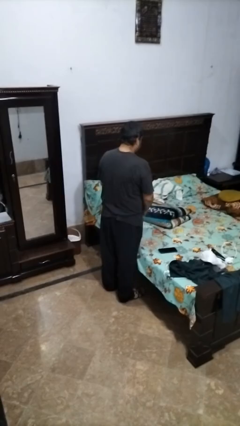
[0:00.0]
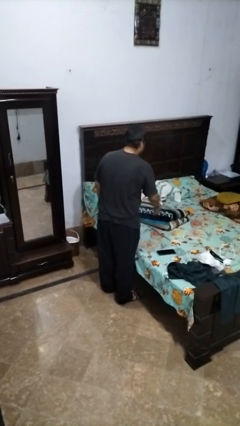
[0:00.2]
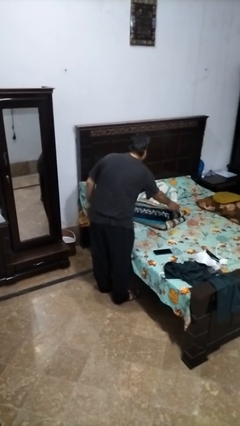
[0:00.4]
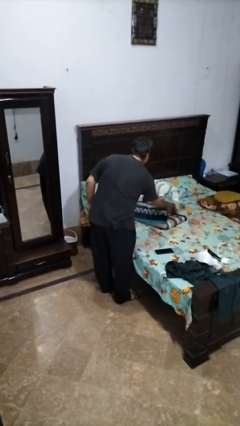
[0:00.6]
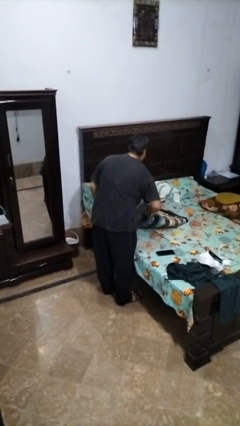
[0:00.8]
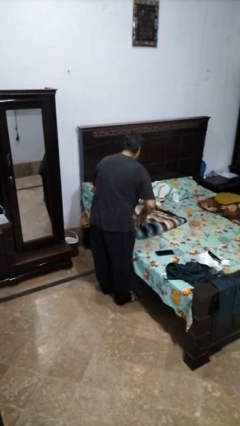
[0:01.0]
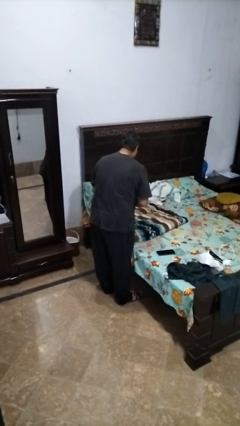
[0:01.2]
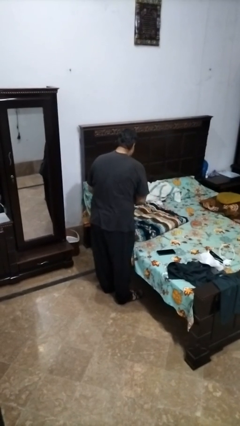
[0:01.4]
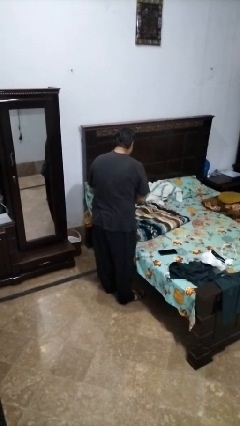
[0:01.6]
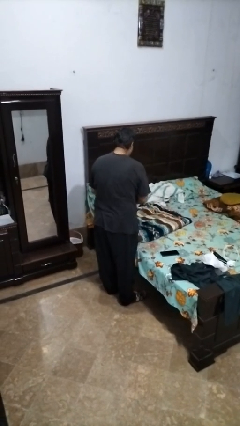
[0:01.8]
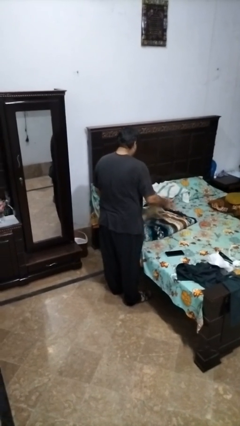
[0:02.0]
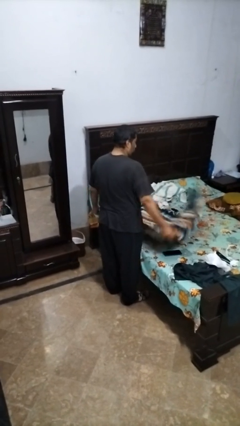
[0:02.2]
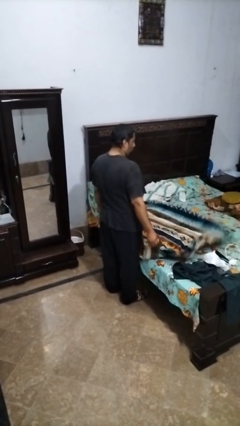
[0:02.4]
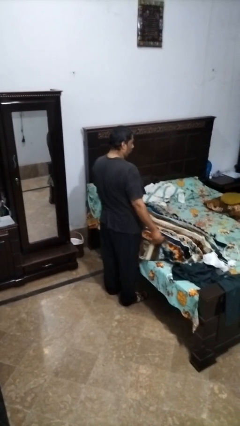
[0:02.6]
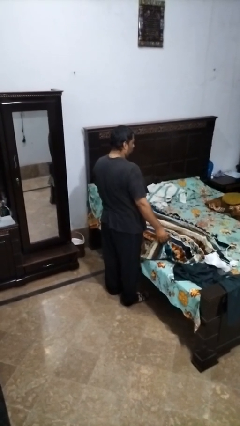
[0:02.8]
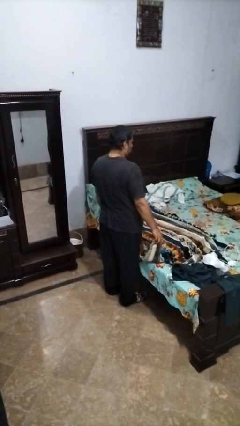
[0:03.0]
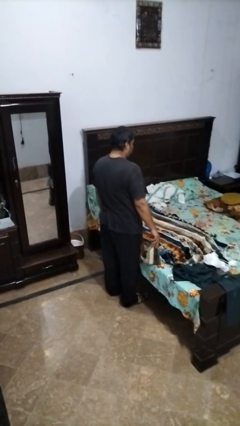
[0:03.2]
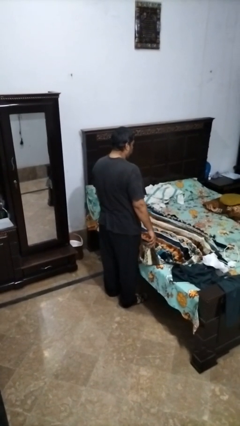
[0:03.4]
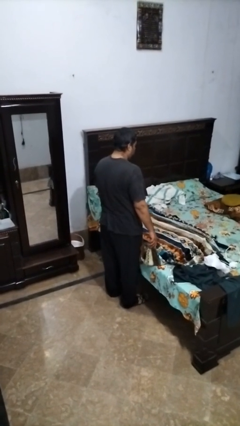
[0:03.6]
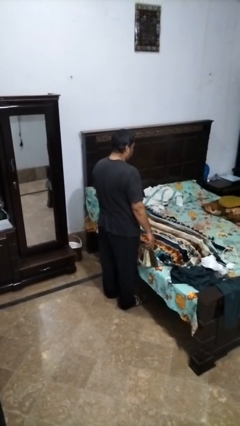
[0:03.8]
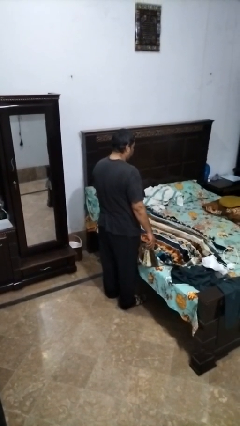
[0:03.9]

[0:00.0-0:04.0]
person unfolds blanket

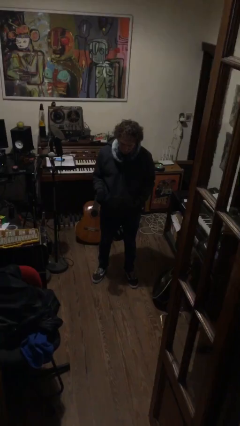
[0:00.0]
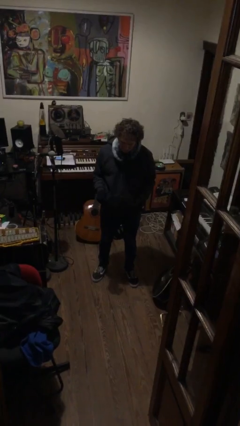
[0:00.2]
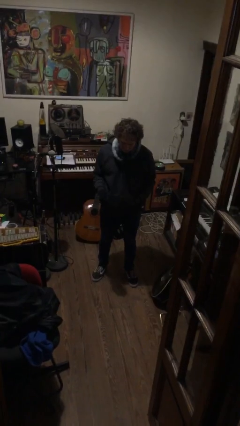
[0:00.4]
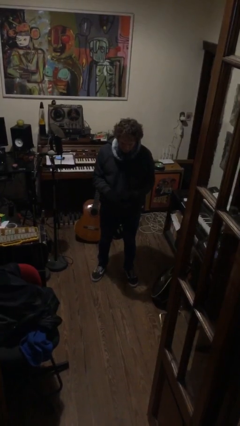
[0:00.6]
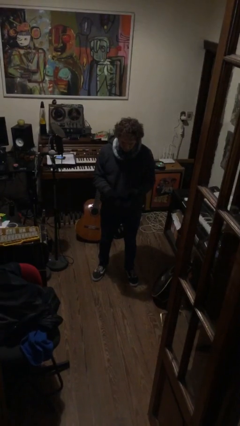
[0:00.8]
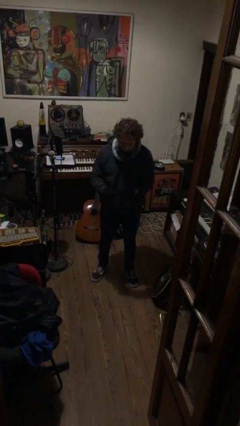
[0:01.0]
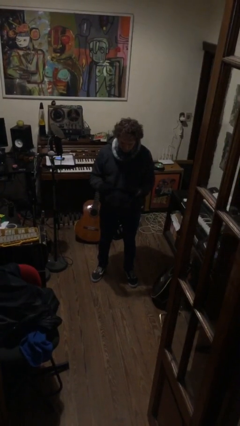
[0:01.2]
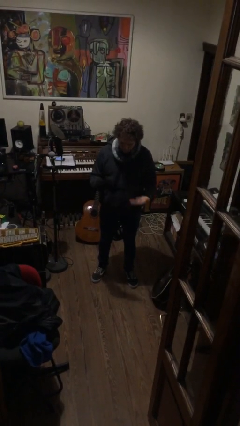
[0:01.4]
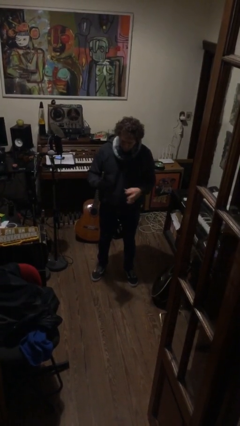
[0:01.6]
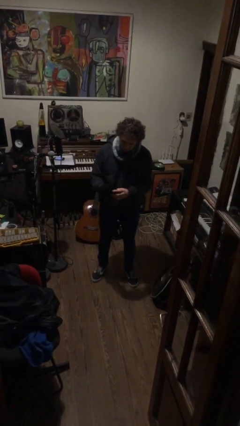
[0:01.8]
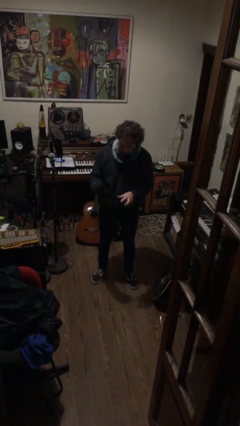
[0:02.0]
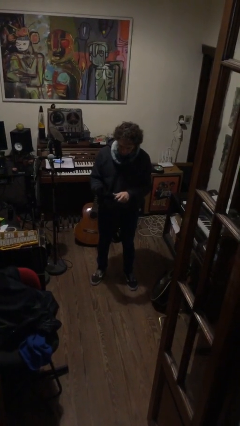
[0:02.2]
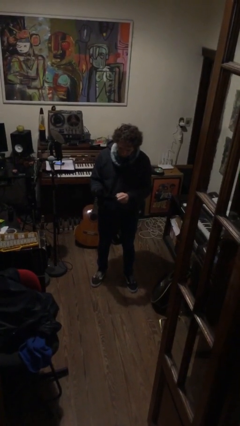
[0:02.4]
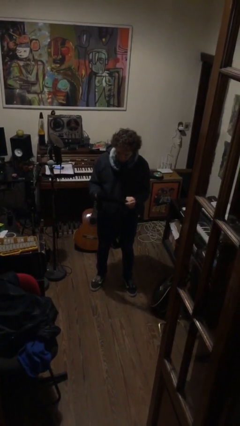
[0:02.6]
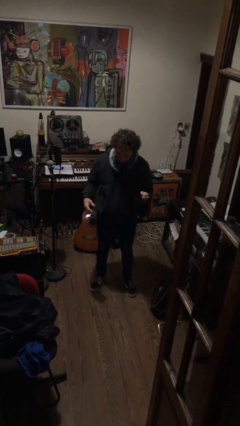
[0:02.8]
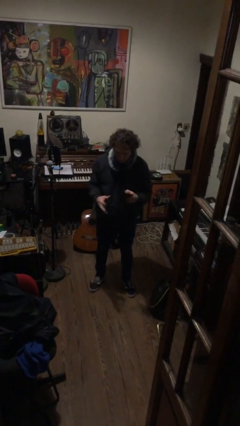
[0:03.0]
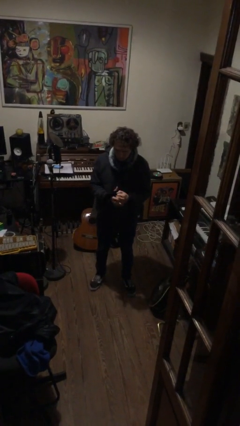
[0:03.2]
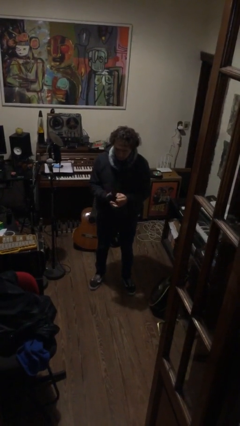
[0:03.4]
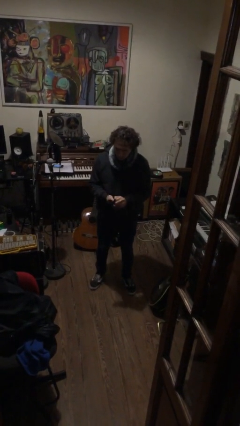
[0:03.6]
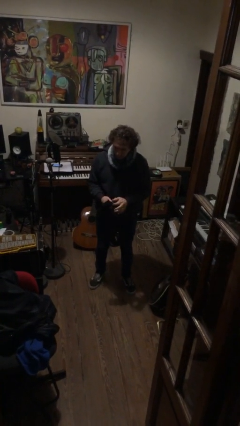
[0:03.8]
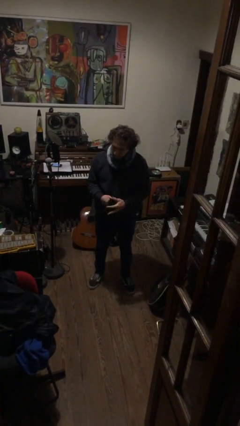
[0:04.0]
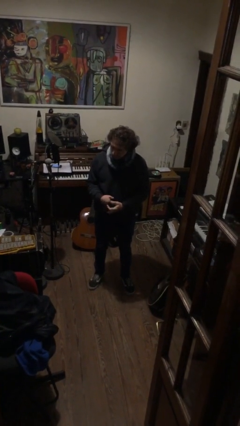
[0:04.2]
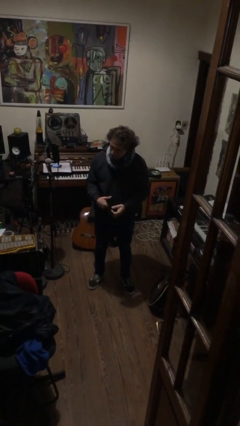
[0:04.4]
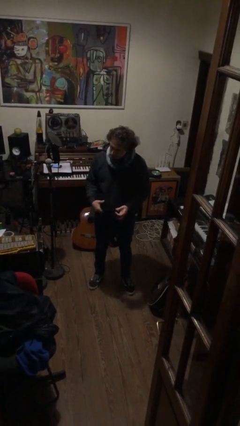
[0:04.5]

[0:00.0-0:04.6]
person takes off gloves

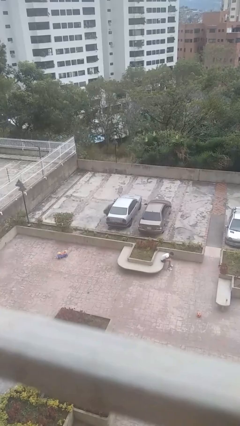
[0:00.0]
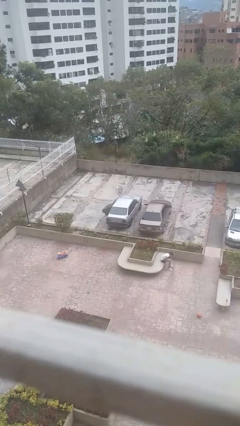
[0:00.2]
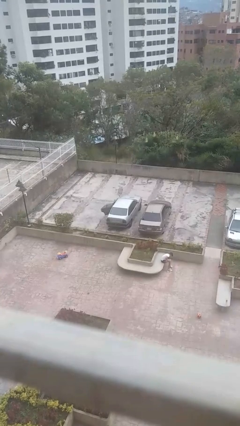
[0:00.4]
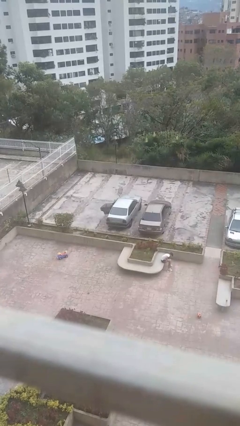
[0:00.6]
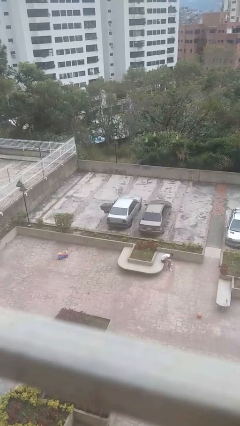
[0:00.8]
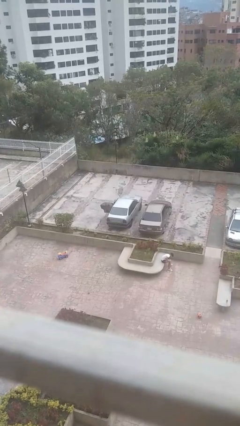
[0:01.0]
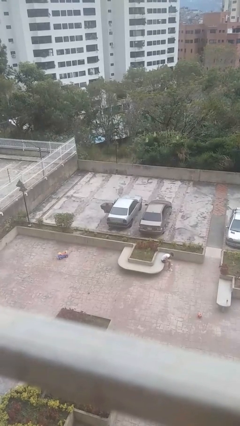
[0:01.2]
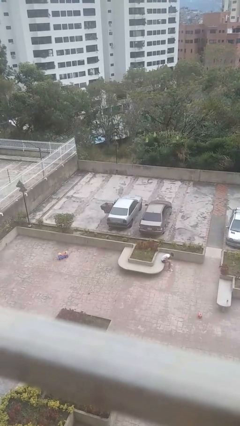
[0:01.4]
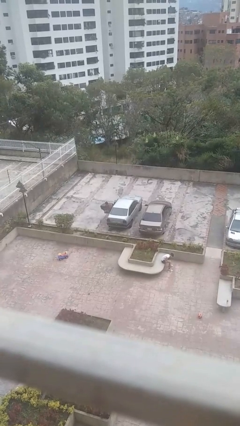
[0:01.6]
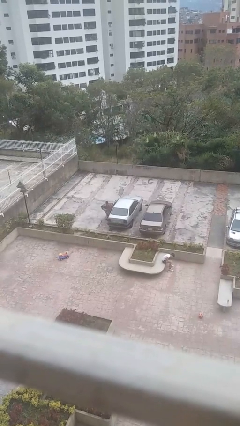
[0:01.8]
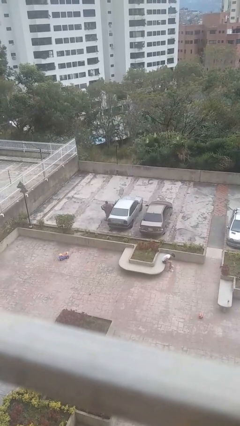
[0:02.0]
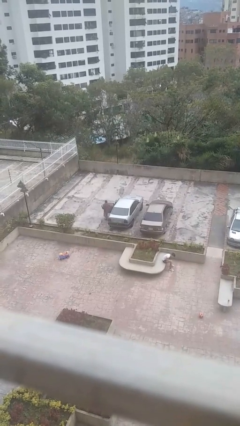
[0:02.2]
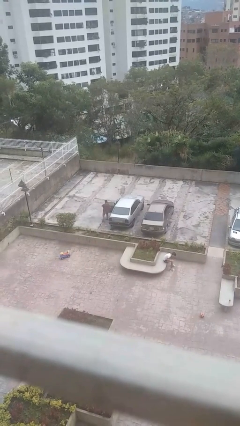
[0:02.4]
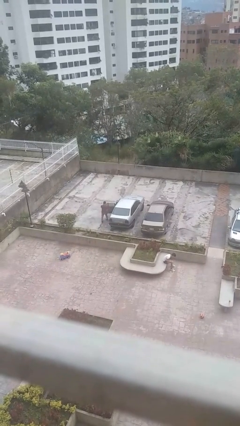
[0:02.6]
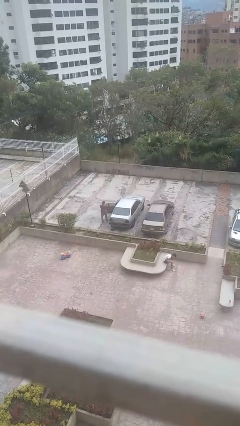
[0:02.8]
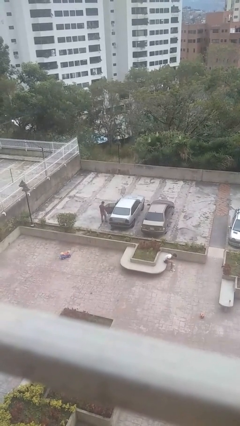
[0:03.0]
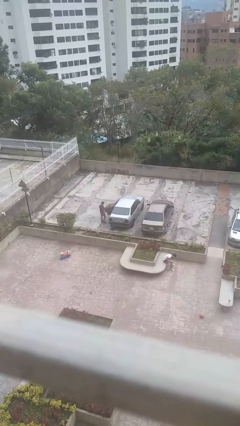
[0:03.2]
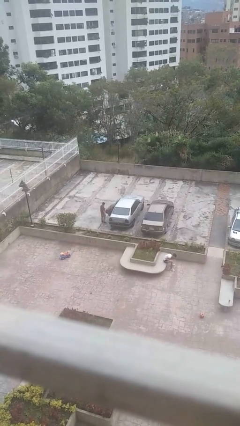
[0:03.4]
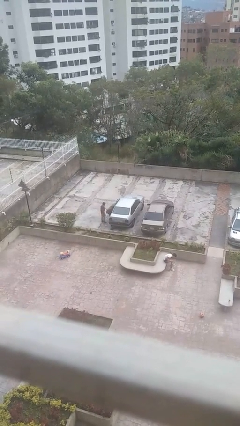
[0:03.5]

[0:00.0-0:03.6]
car drops off person

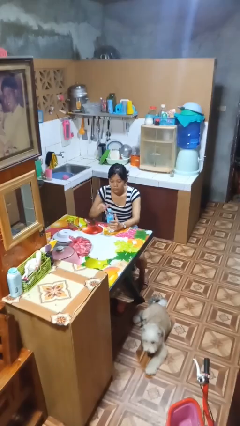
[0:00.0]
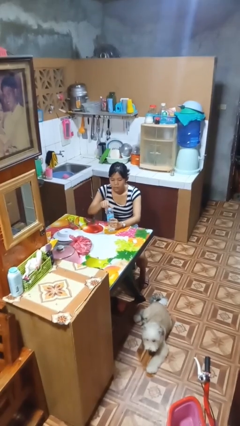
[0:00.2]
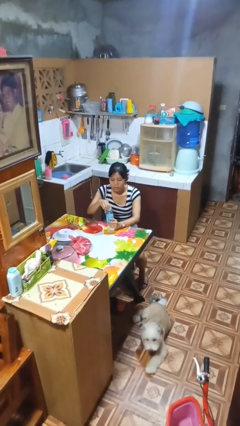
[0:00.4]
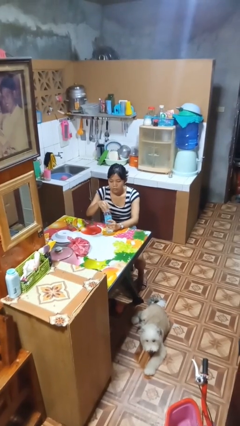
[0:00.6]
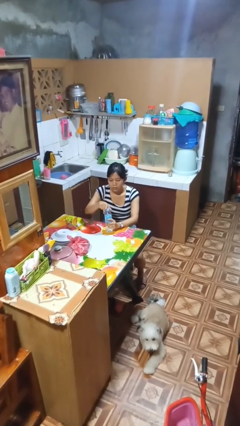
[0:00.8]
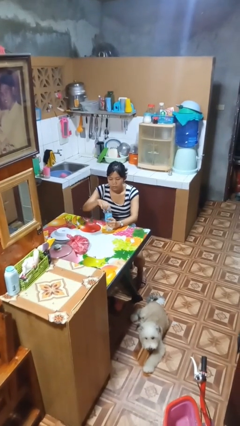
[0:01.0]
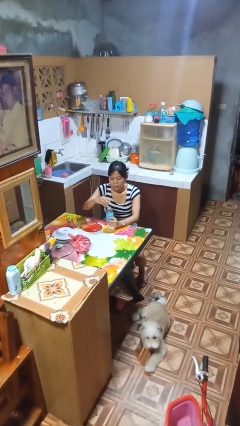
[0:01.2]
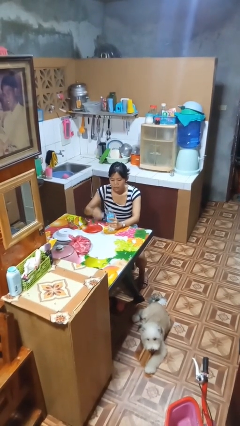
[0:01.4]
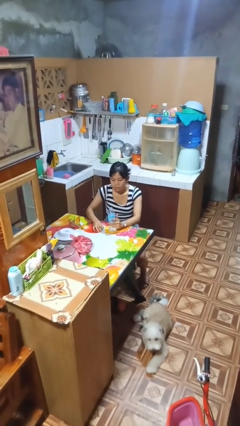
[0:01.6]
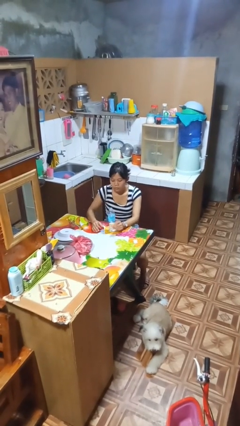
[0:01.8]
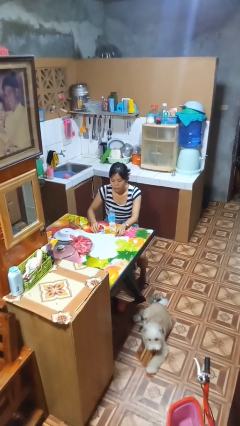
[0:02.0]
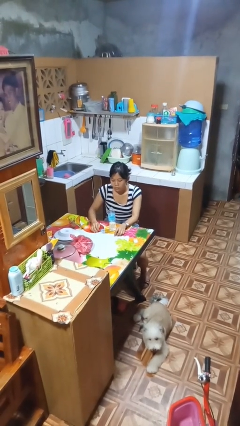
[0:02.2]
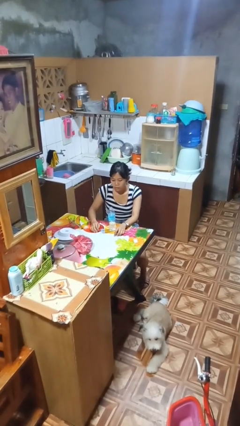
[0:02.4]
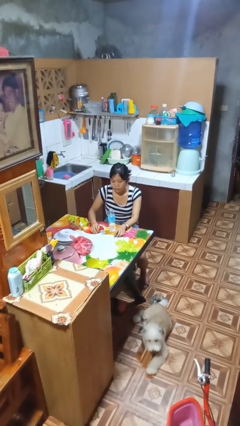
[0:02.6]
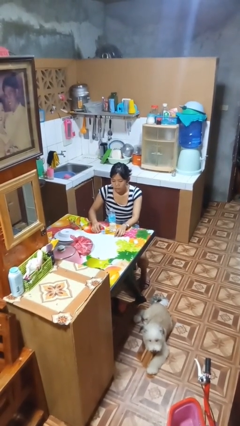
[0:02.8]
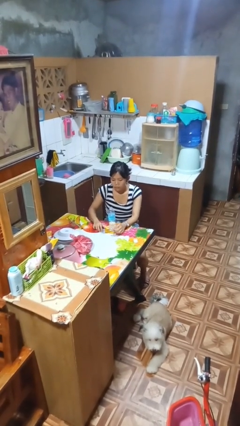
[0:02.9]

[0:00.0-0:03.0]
person unscrews lid from bottle

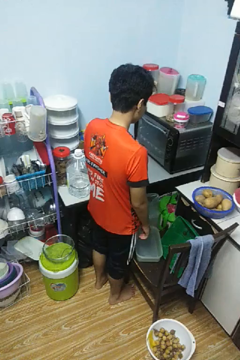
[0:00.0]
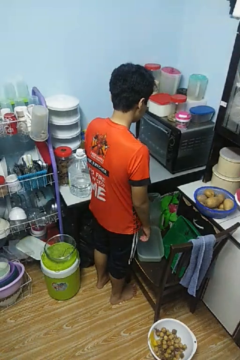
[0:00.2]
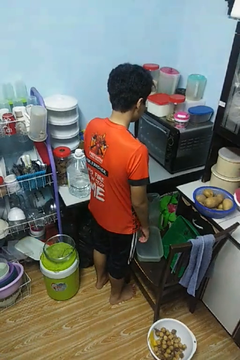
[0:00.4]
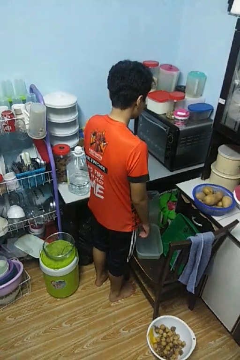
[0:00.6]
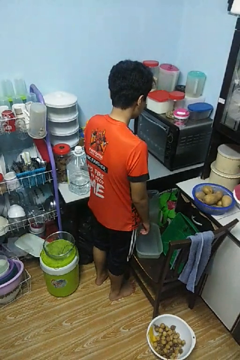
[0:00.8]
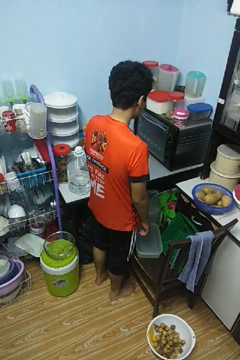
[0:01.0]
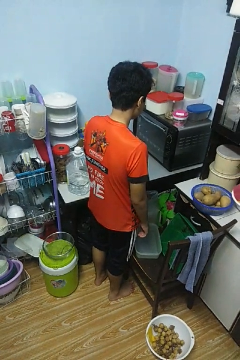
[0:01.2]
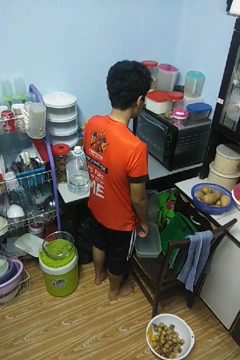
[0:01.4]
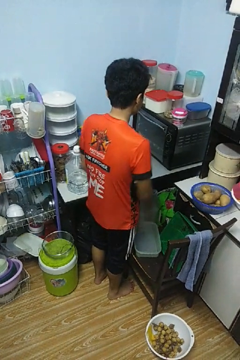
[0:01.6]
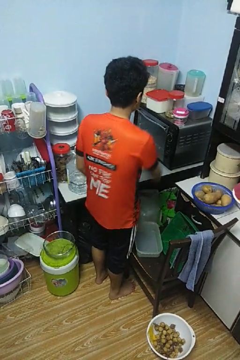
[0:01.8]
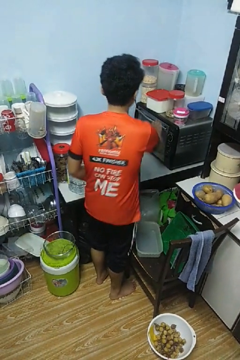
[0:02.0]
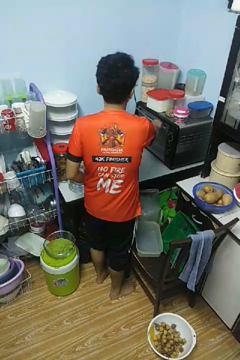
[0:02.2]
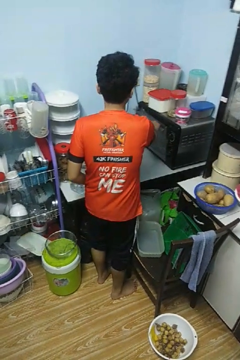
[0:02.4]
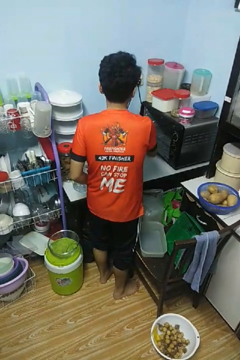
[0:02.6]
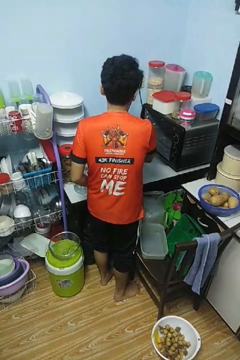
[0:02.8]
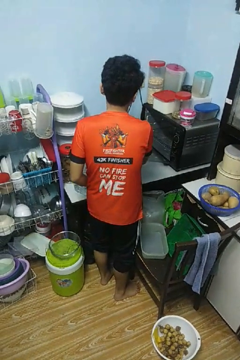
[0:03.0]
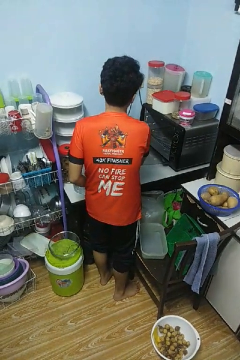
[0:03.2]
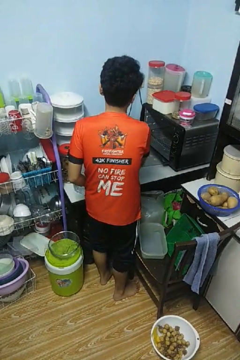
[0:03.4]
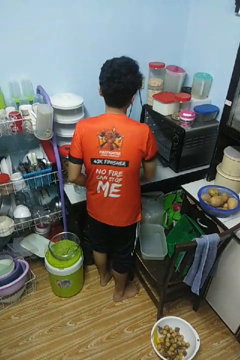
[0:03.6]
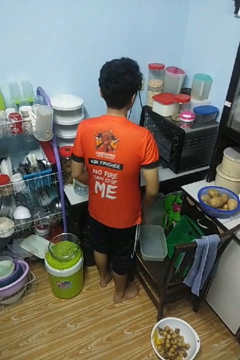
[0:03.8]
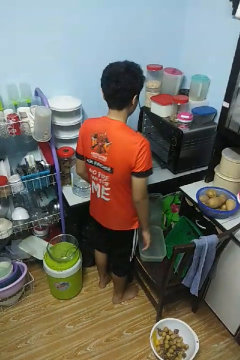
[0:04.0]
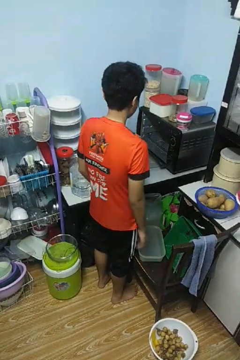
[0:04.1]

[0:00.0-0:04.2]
person opens oven door
